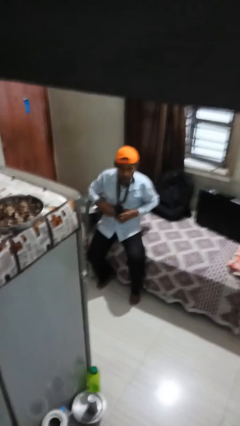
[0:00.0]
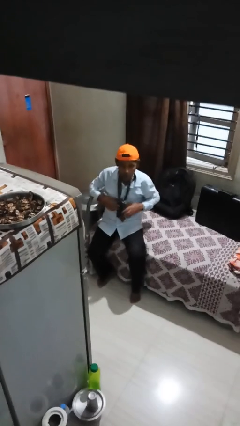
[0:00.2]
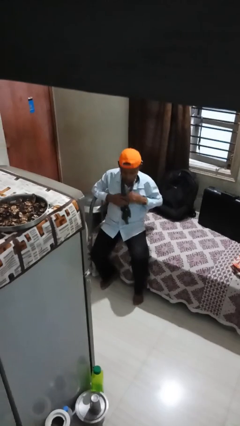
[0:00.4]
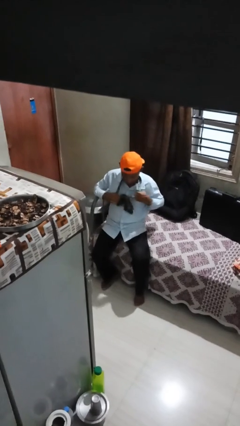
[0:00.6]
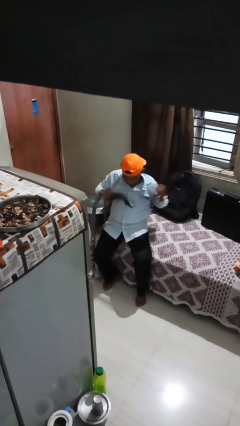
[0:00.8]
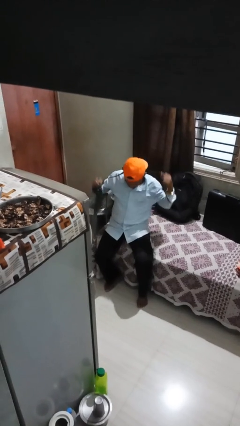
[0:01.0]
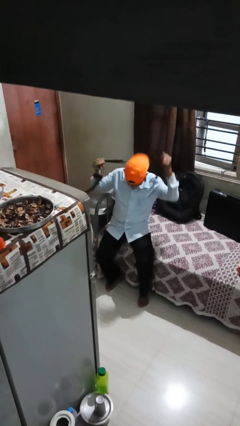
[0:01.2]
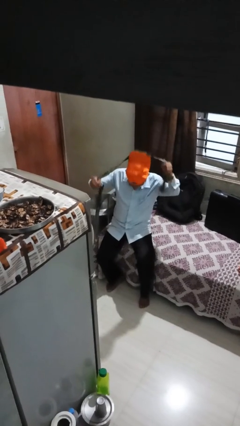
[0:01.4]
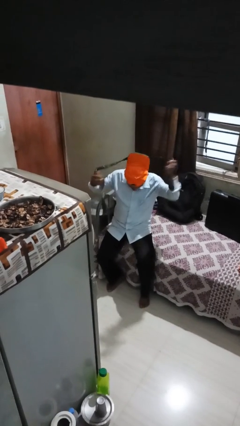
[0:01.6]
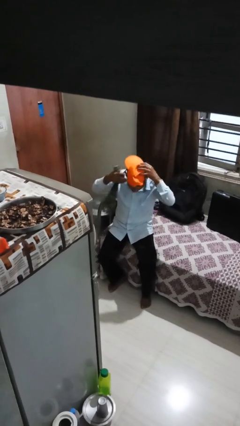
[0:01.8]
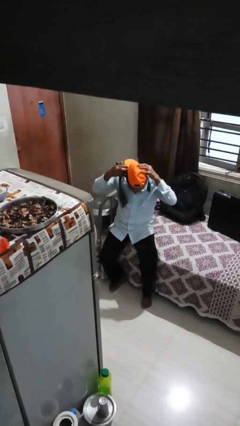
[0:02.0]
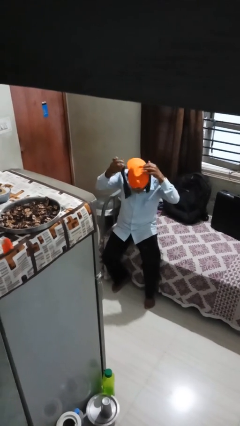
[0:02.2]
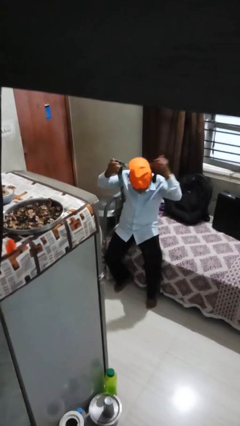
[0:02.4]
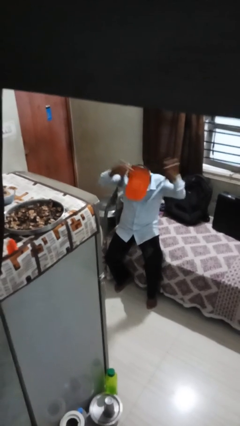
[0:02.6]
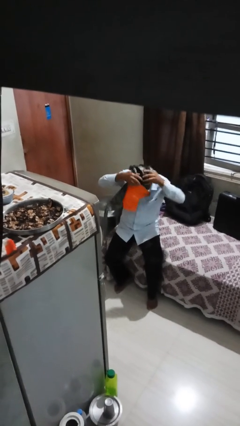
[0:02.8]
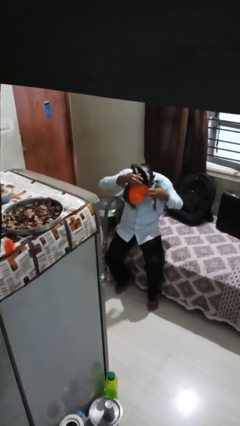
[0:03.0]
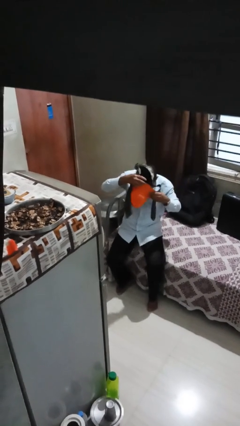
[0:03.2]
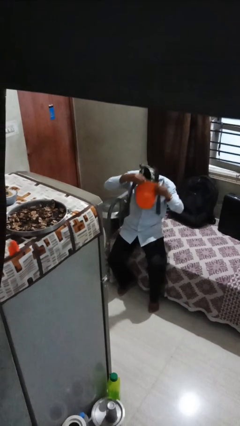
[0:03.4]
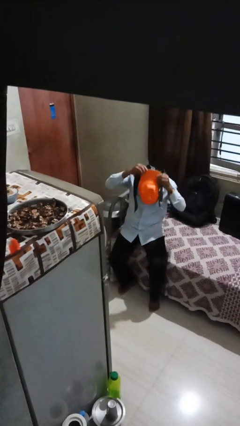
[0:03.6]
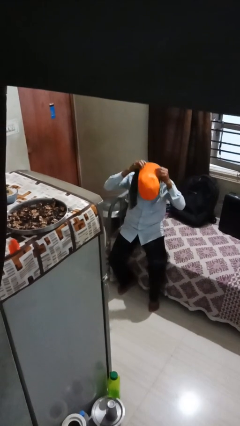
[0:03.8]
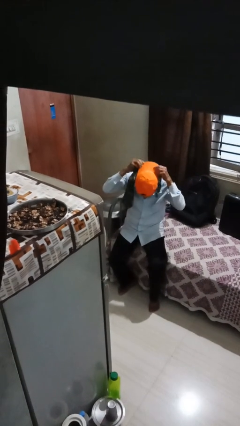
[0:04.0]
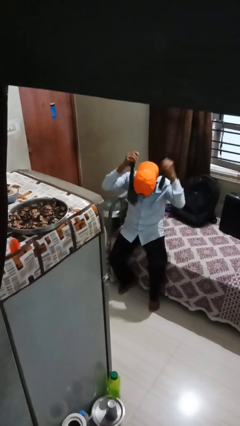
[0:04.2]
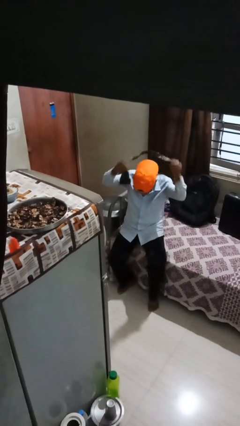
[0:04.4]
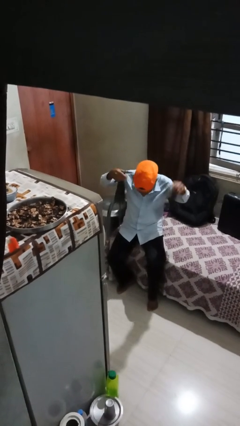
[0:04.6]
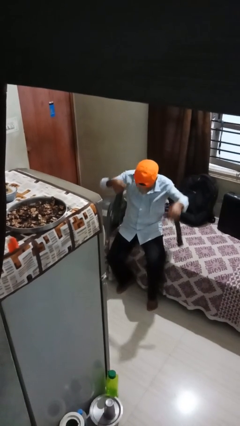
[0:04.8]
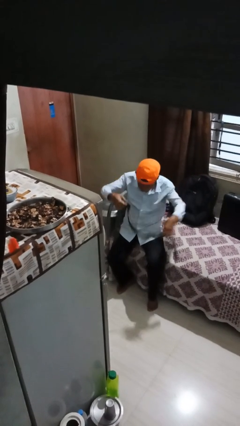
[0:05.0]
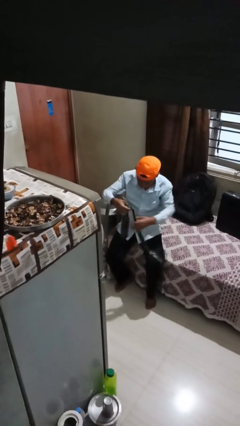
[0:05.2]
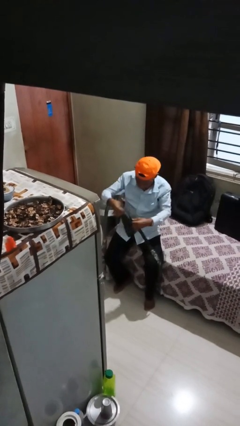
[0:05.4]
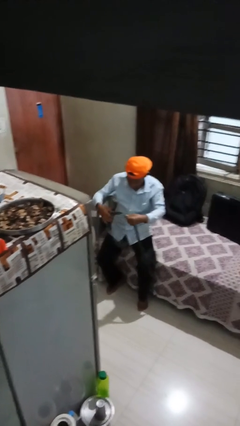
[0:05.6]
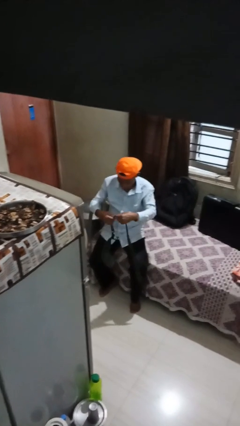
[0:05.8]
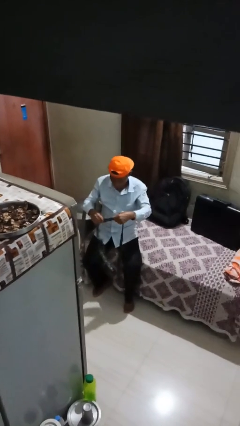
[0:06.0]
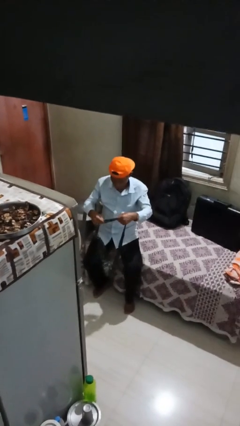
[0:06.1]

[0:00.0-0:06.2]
person takes off necktie

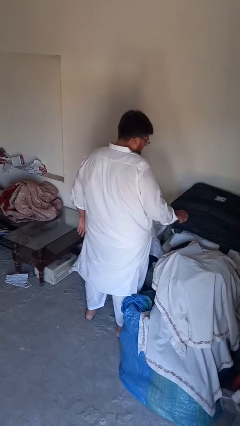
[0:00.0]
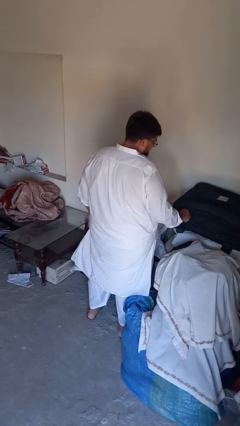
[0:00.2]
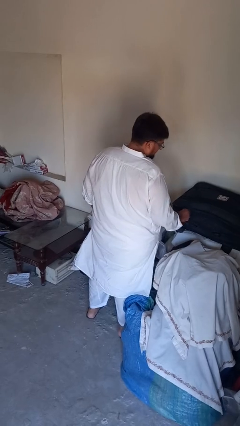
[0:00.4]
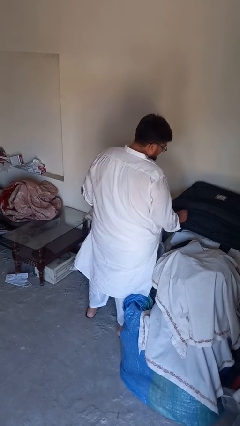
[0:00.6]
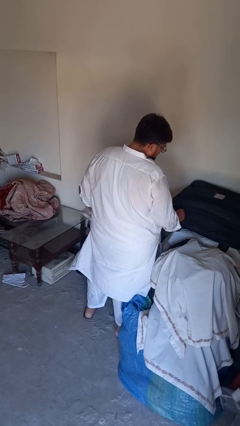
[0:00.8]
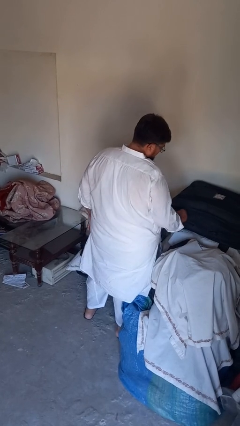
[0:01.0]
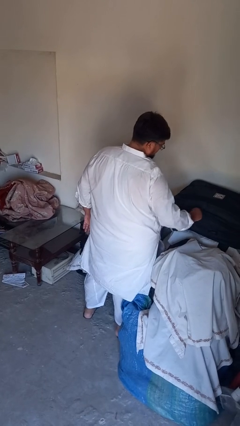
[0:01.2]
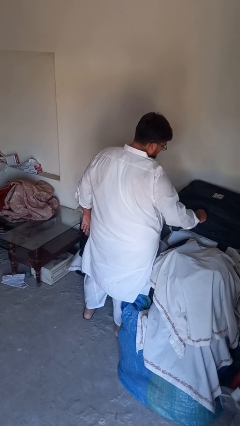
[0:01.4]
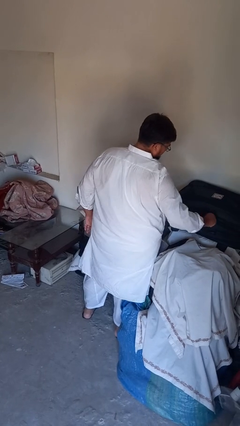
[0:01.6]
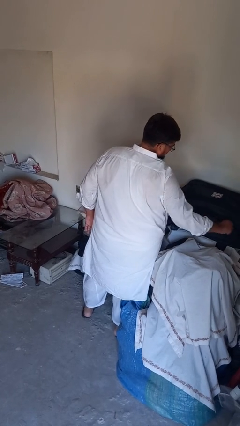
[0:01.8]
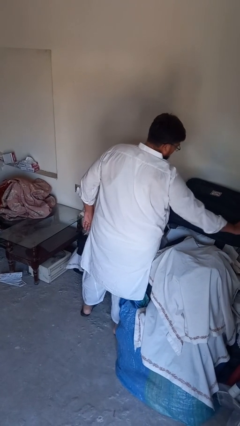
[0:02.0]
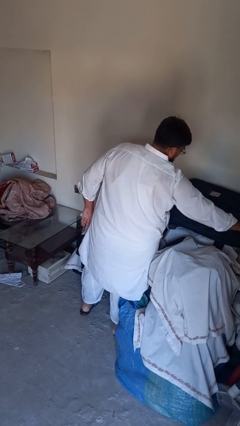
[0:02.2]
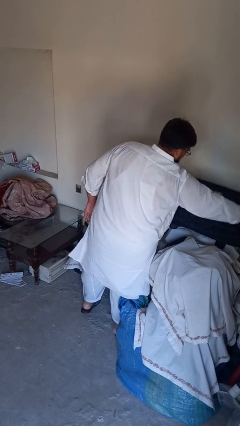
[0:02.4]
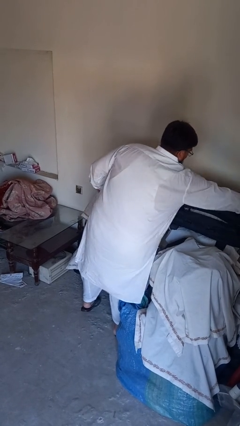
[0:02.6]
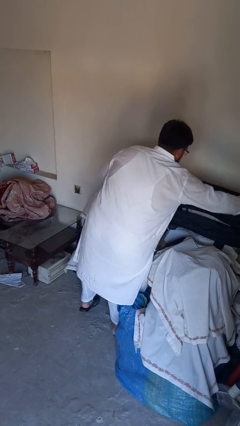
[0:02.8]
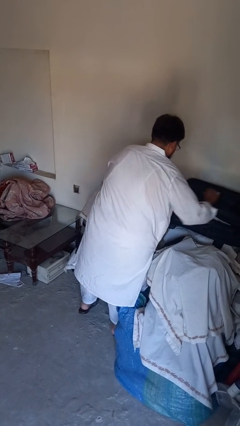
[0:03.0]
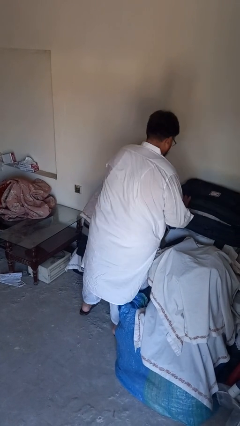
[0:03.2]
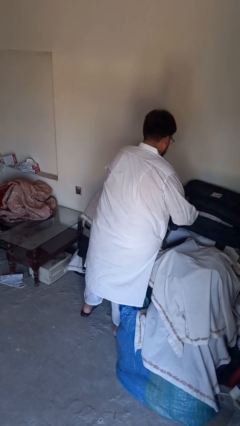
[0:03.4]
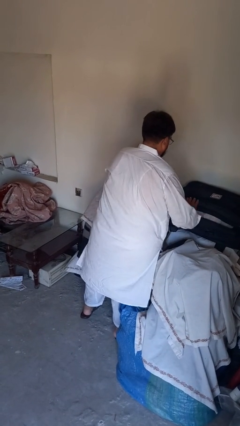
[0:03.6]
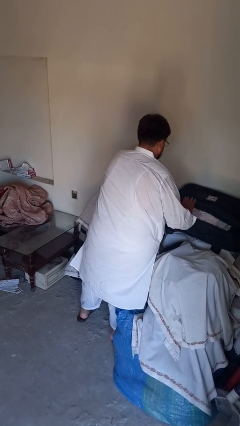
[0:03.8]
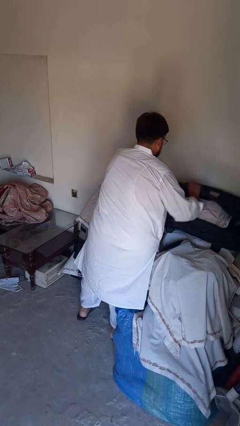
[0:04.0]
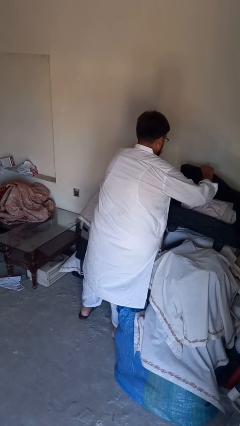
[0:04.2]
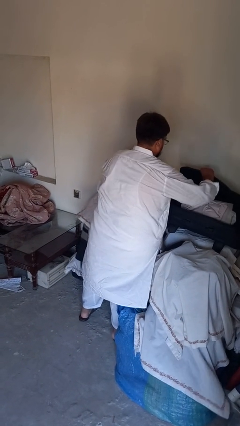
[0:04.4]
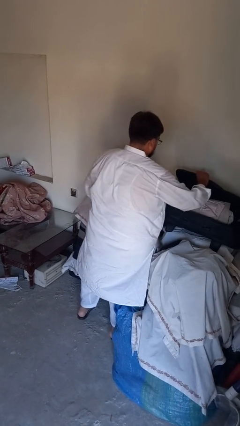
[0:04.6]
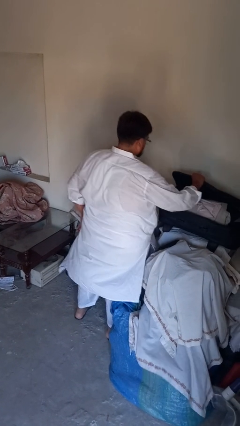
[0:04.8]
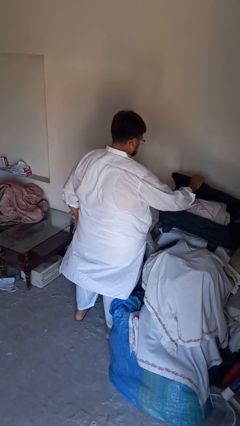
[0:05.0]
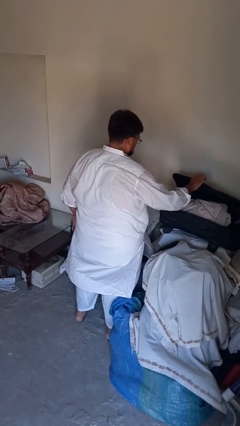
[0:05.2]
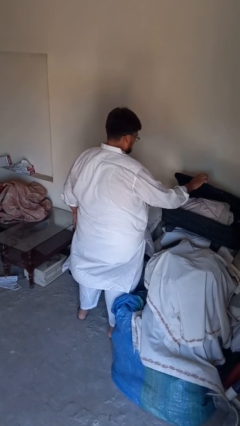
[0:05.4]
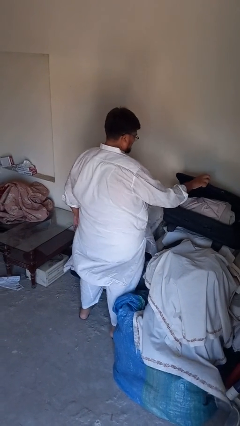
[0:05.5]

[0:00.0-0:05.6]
person opens suitcase

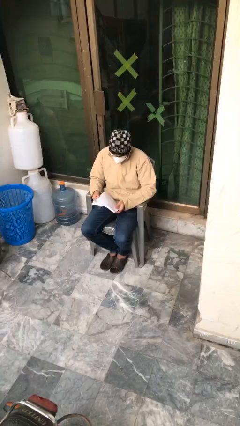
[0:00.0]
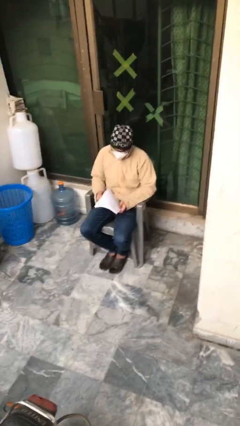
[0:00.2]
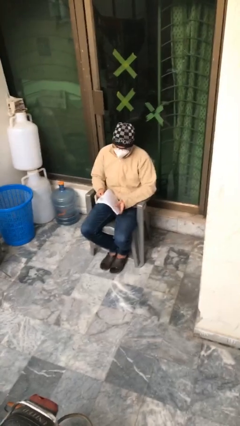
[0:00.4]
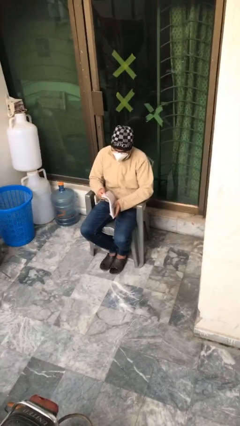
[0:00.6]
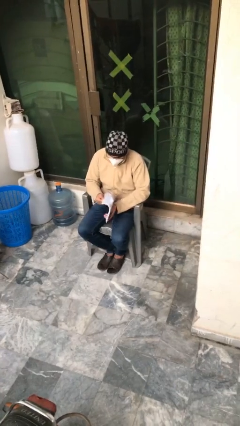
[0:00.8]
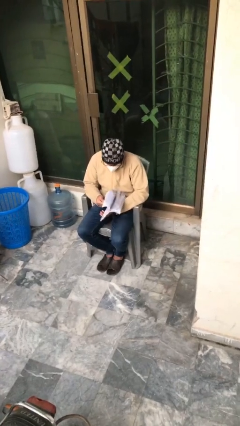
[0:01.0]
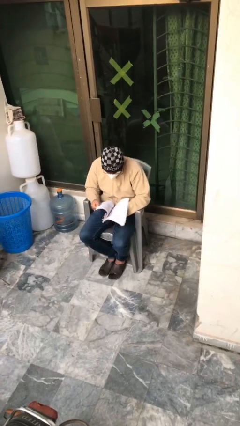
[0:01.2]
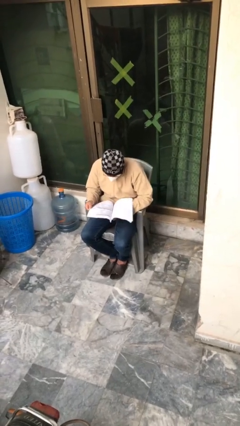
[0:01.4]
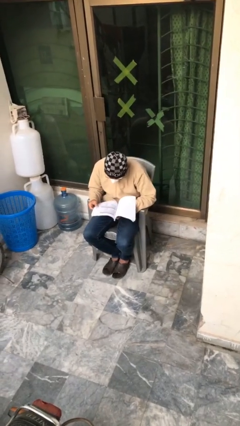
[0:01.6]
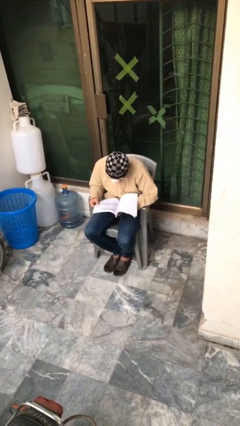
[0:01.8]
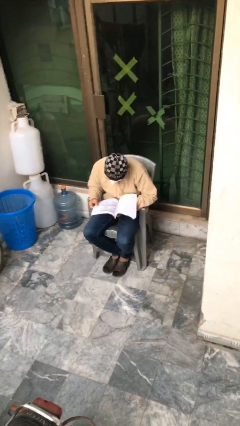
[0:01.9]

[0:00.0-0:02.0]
person reads document

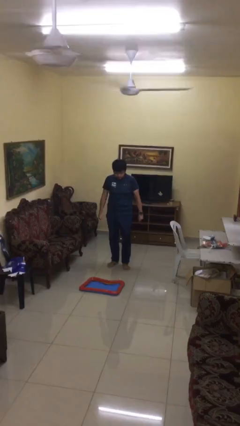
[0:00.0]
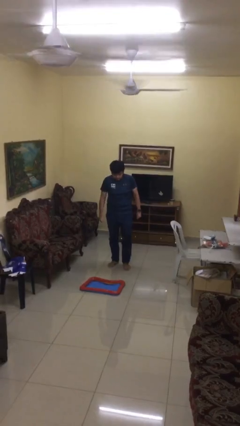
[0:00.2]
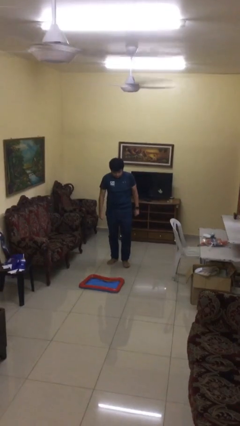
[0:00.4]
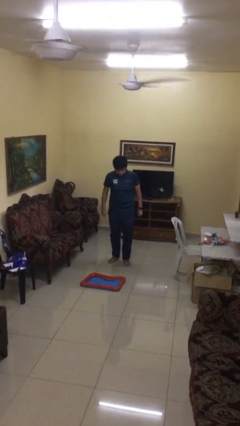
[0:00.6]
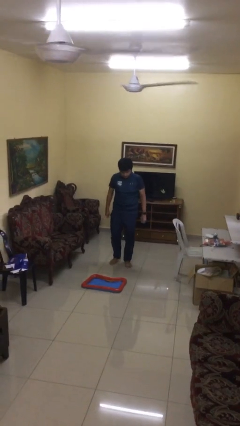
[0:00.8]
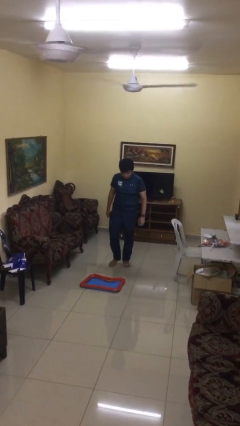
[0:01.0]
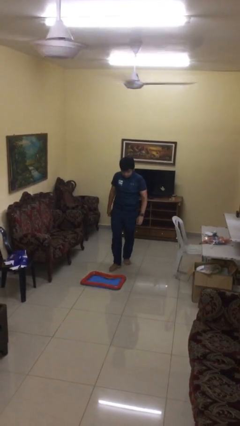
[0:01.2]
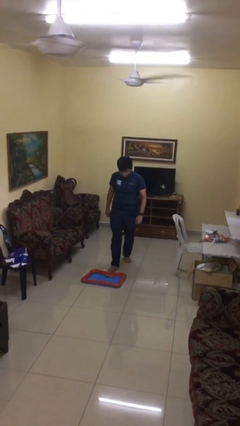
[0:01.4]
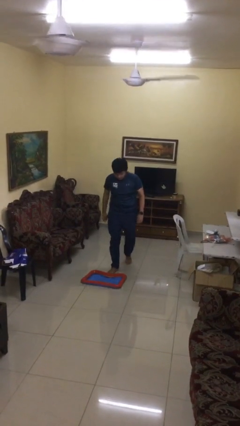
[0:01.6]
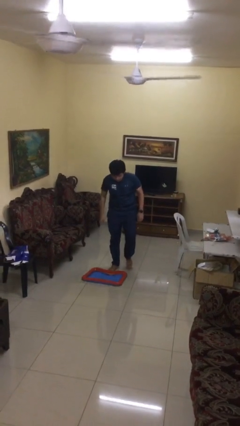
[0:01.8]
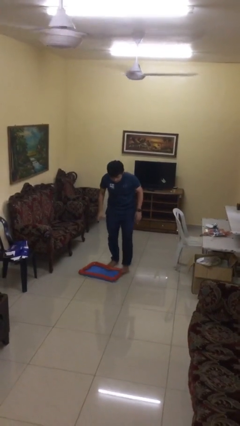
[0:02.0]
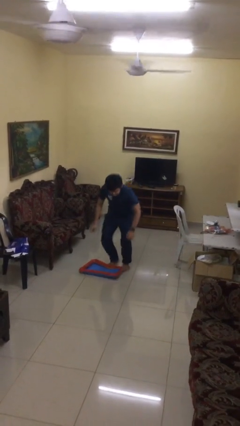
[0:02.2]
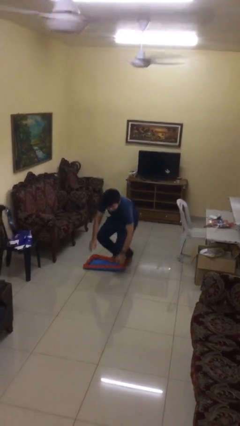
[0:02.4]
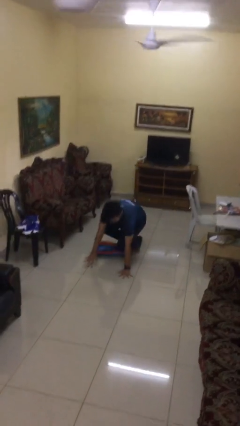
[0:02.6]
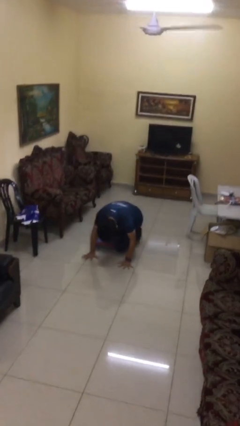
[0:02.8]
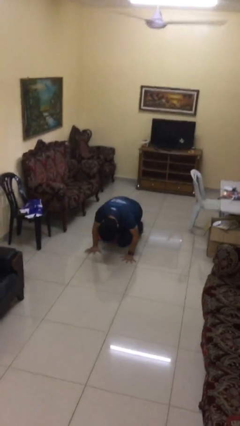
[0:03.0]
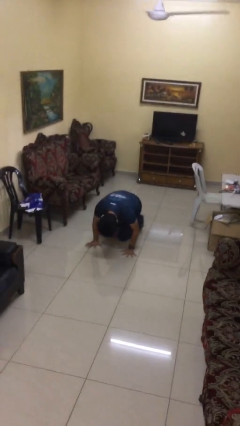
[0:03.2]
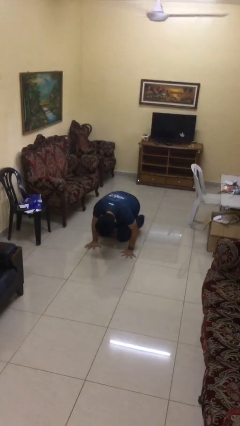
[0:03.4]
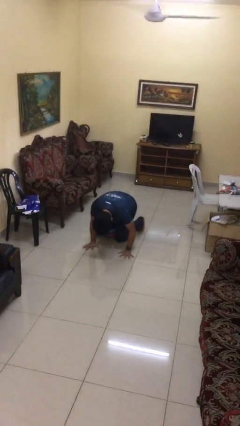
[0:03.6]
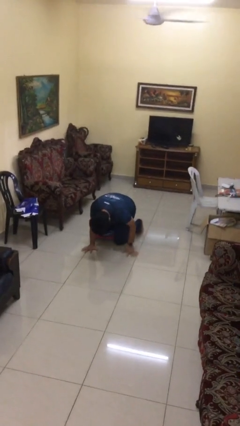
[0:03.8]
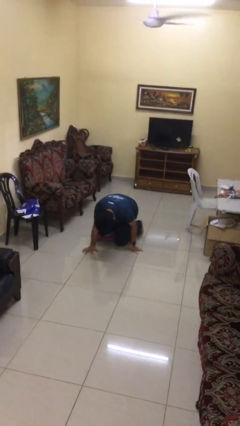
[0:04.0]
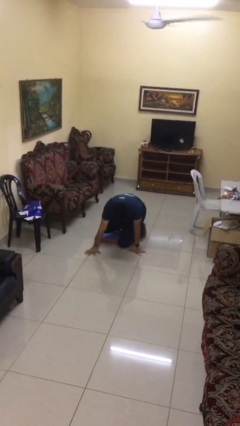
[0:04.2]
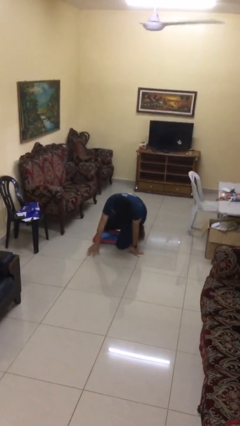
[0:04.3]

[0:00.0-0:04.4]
person trips on object on floor
